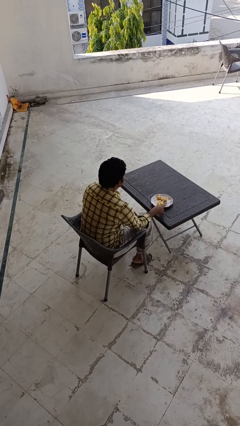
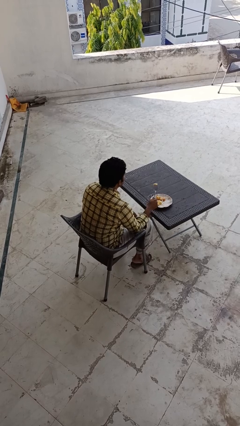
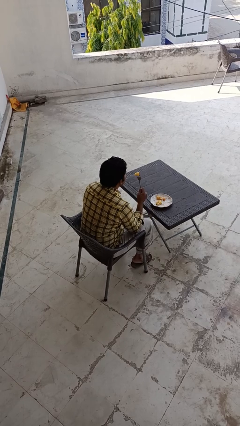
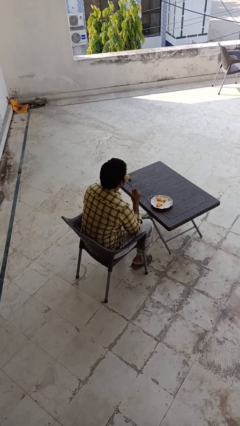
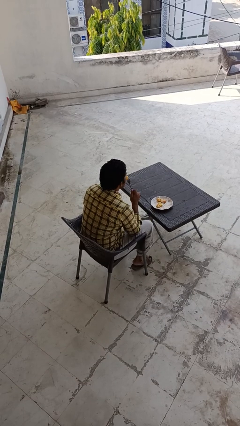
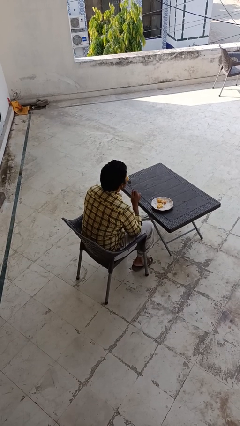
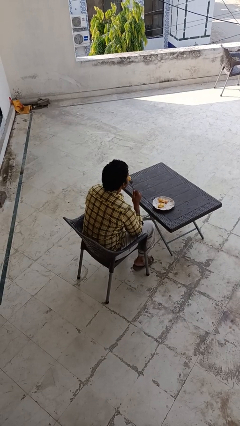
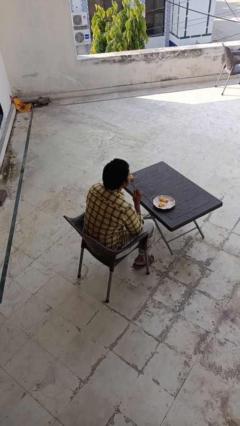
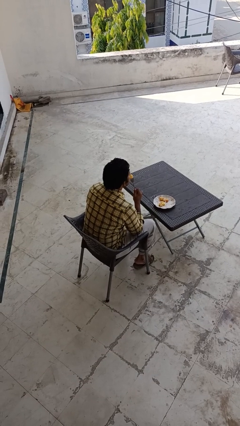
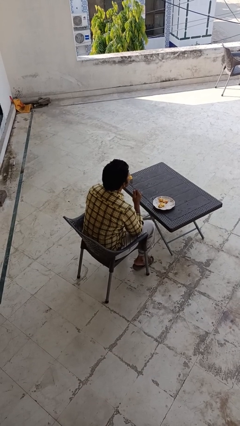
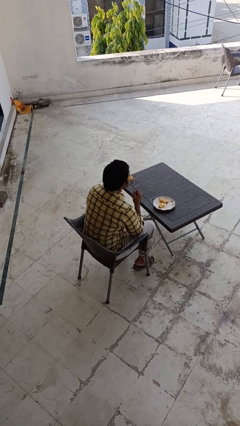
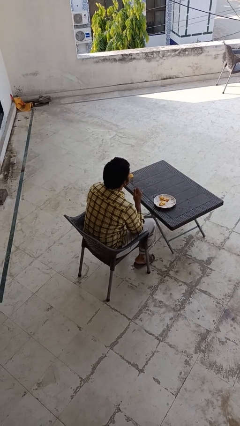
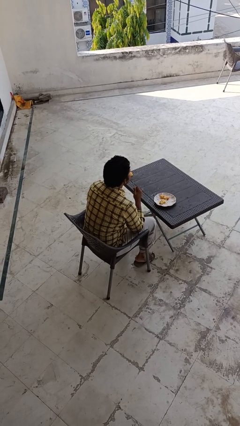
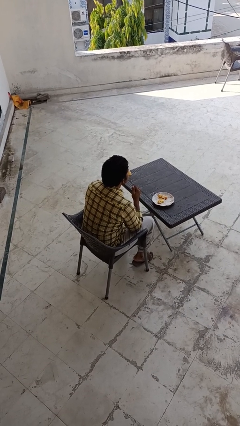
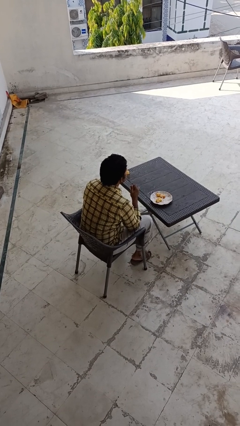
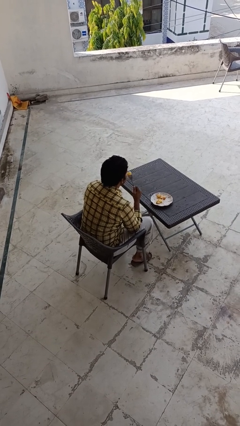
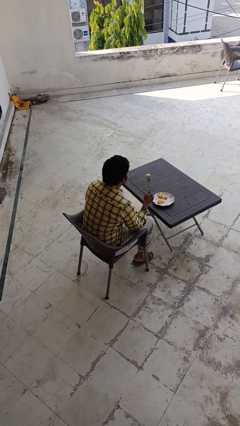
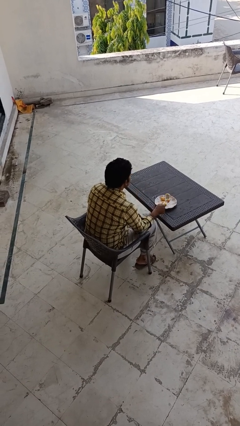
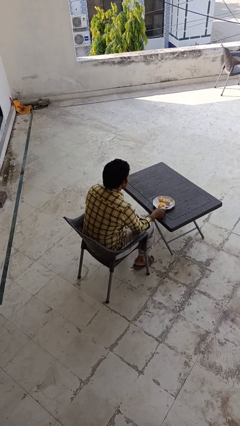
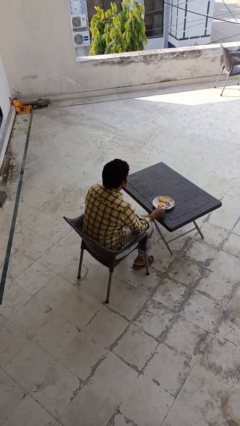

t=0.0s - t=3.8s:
person eats with utensil

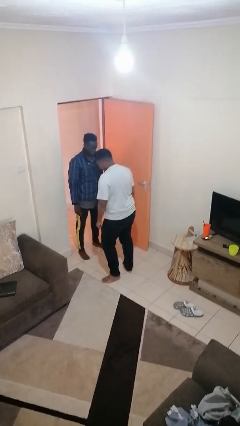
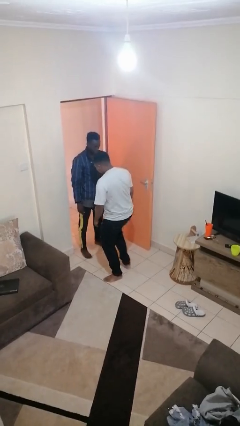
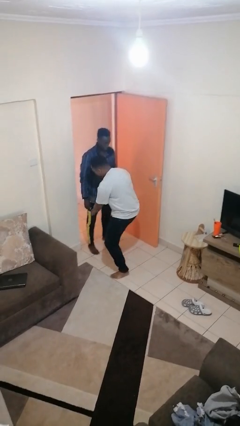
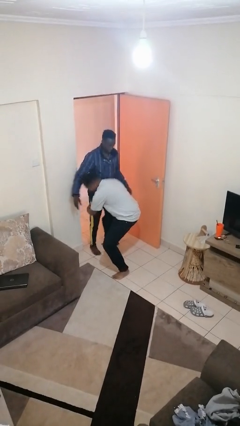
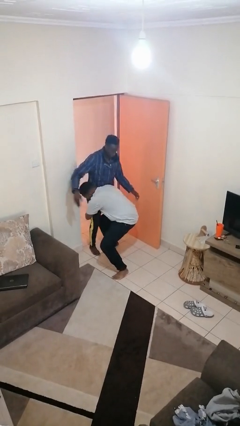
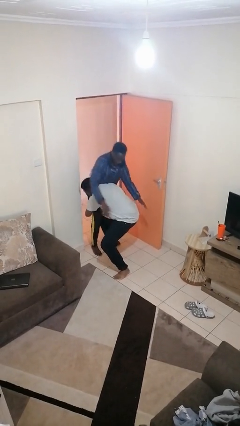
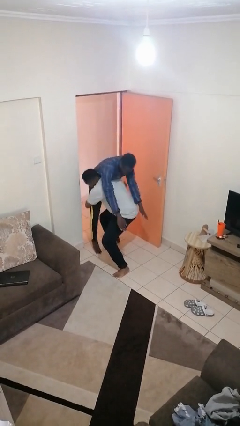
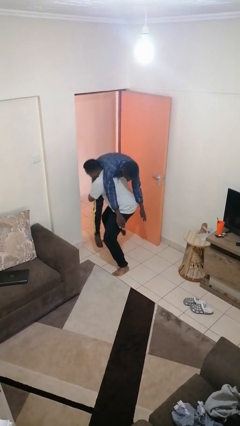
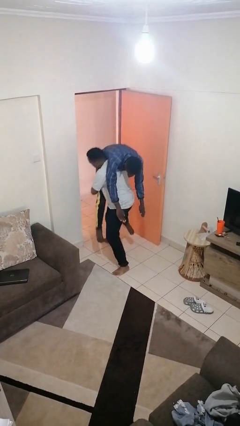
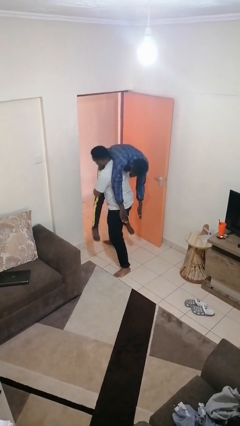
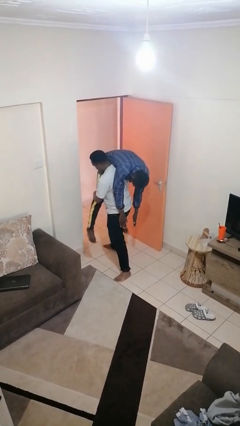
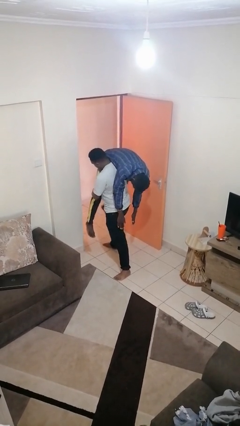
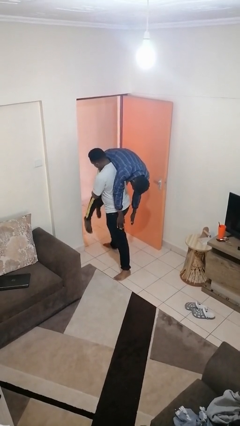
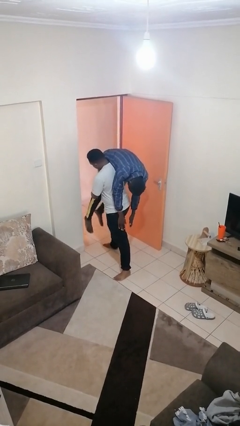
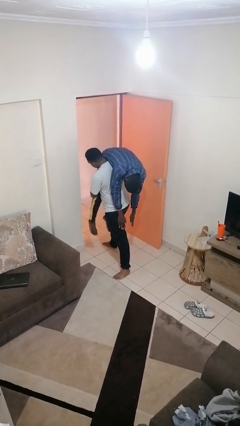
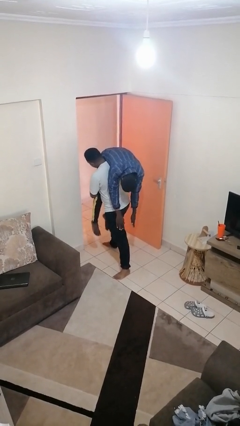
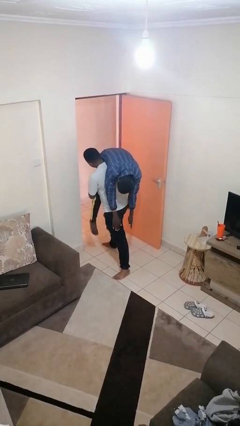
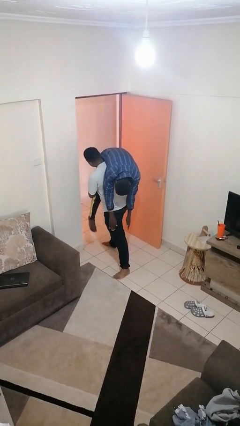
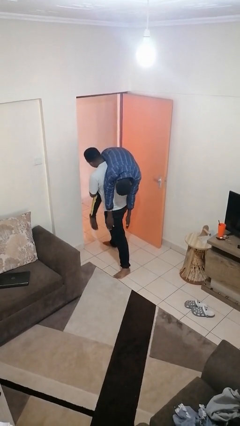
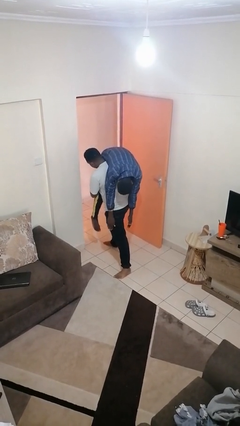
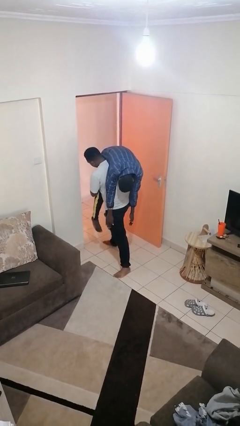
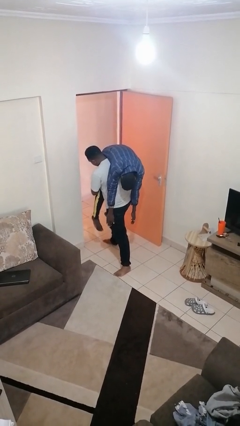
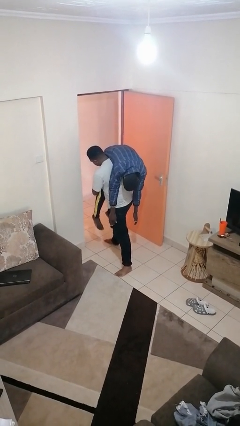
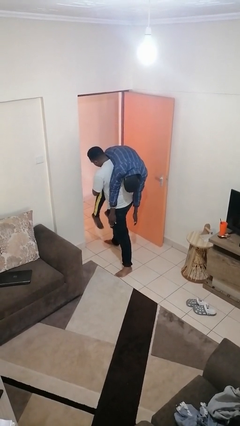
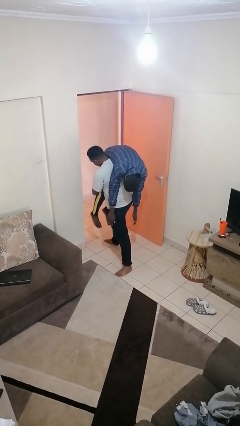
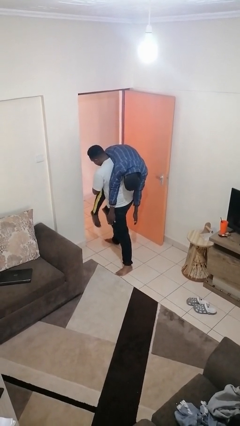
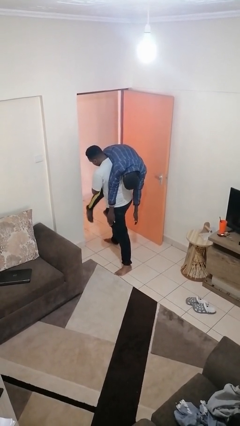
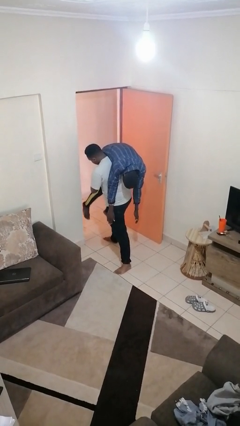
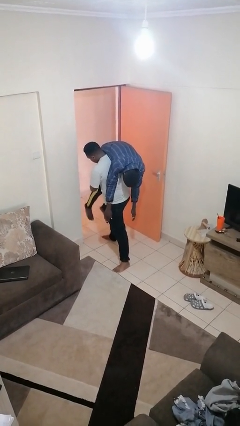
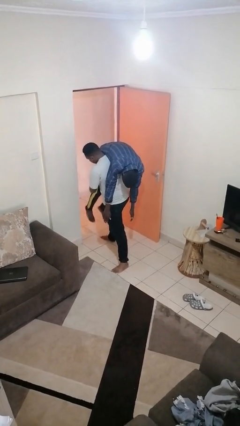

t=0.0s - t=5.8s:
person carries person over shoulder

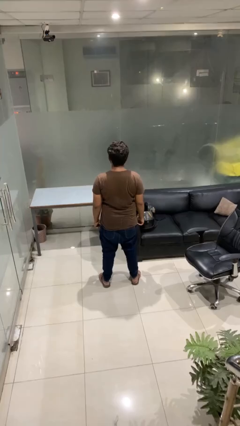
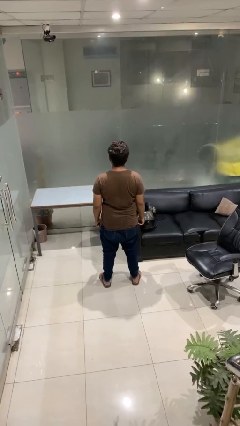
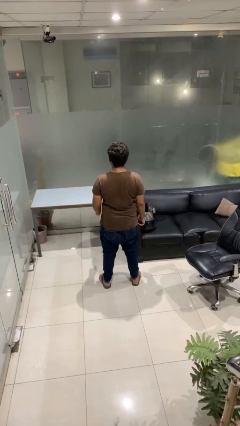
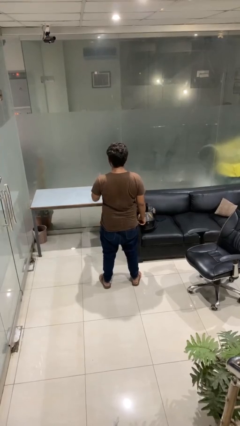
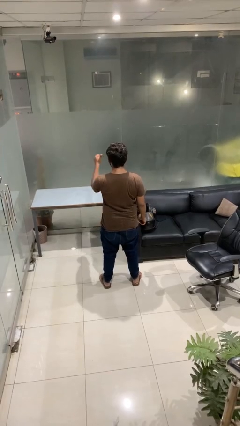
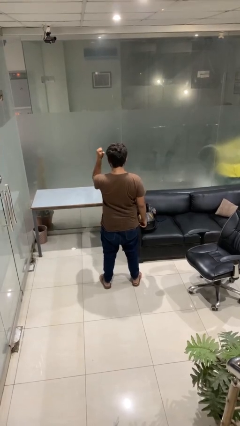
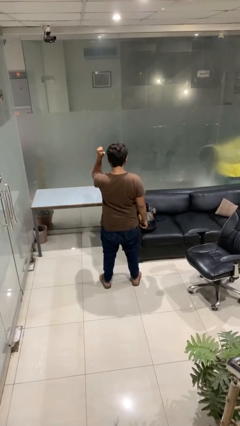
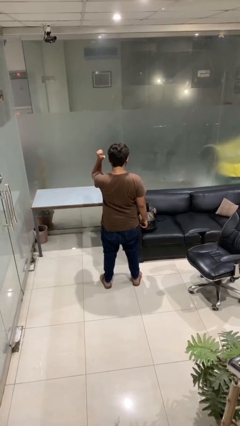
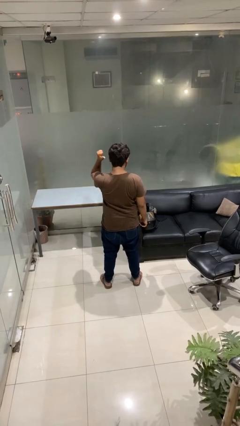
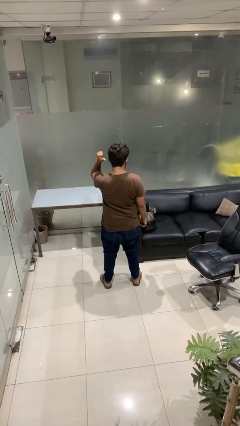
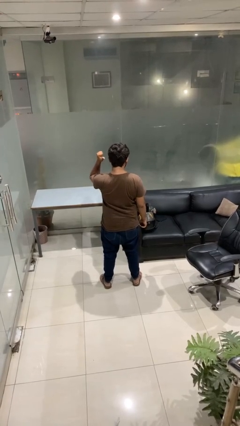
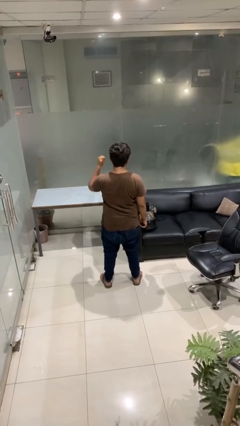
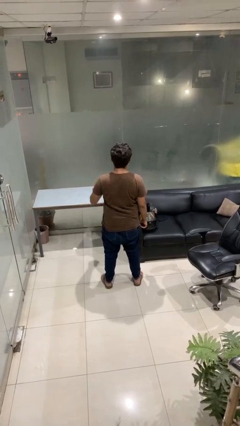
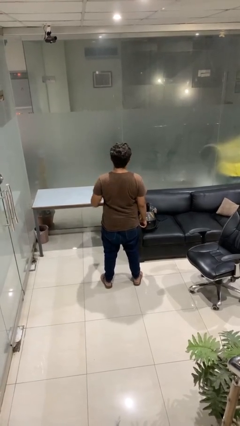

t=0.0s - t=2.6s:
person gestures behind me

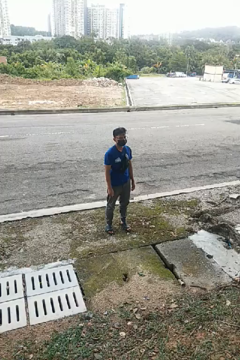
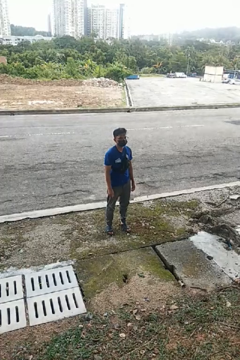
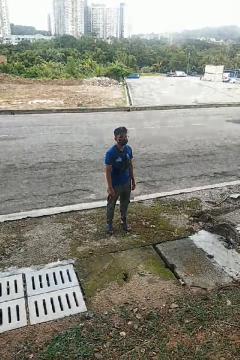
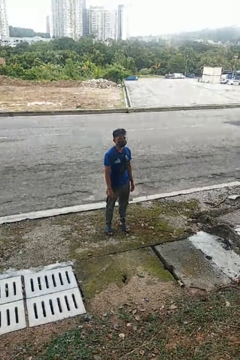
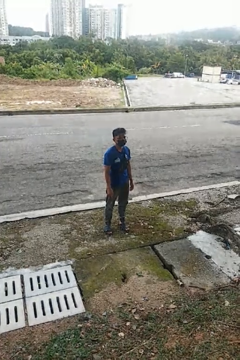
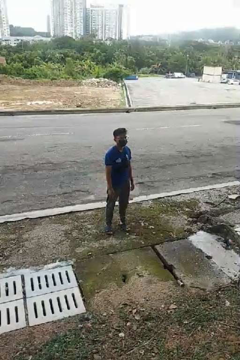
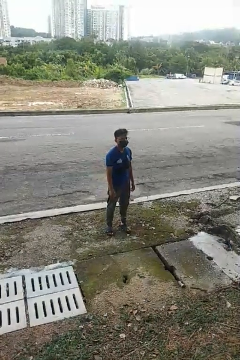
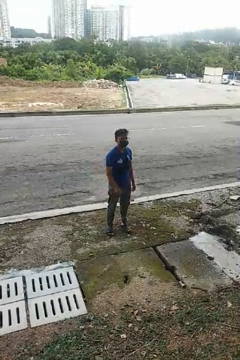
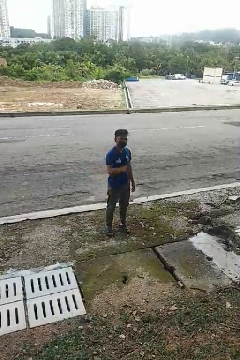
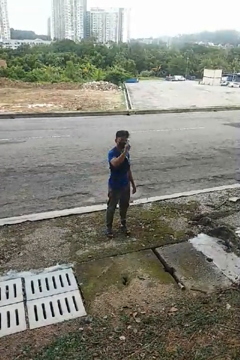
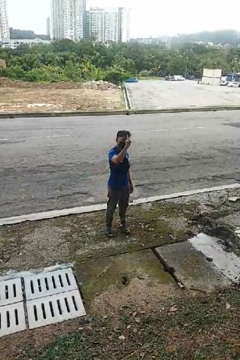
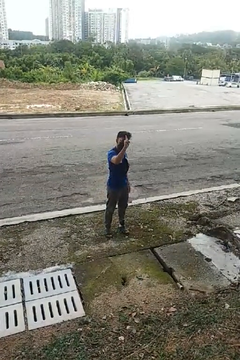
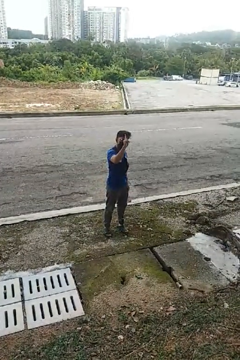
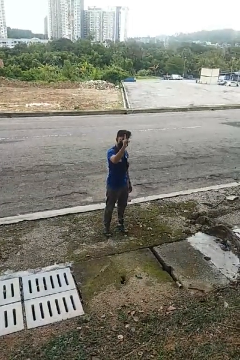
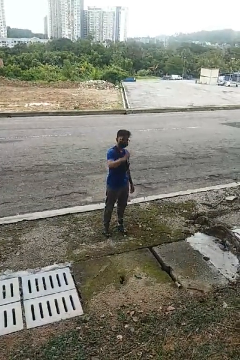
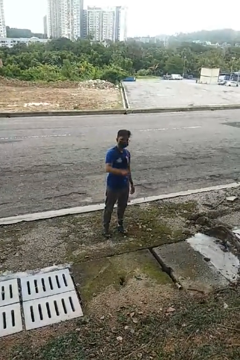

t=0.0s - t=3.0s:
person gestures number one

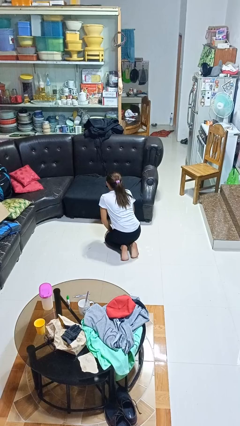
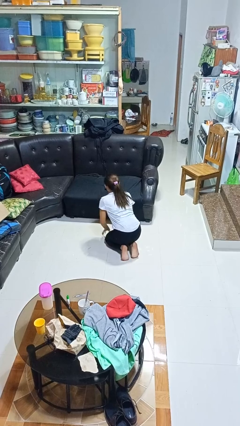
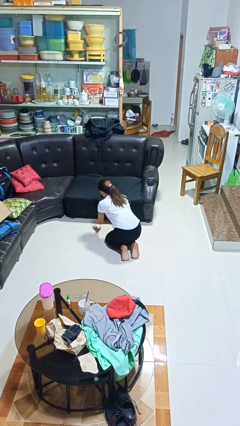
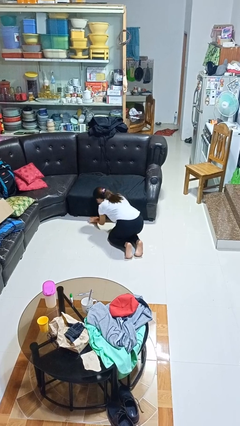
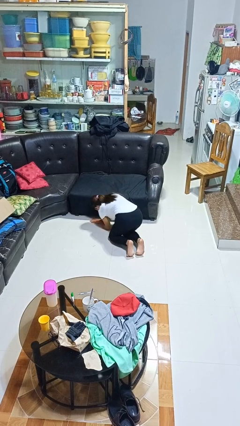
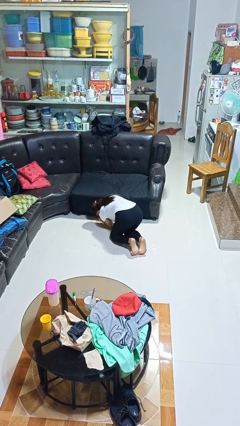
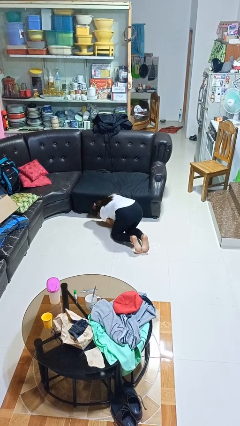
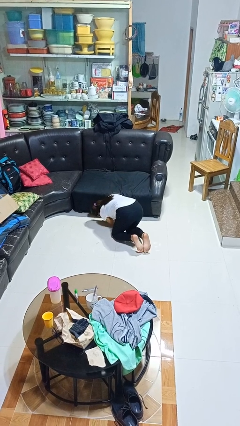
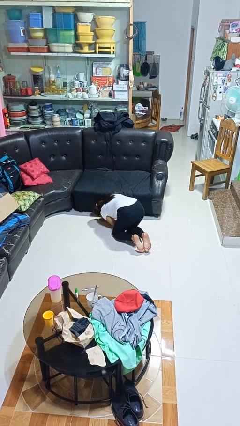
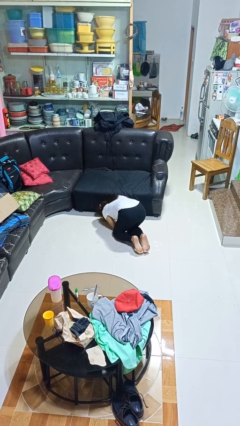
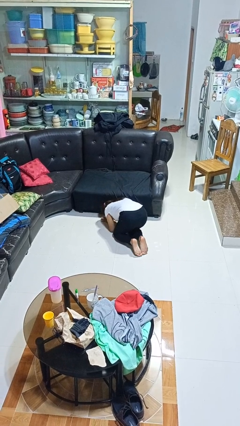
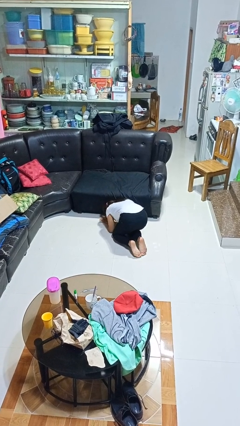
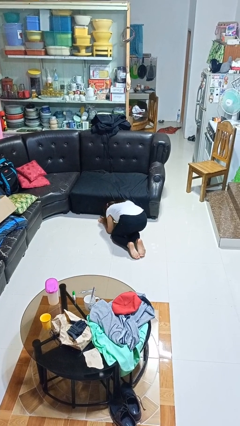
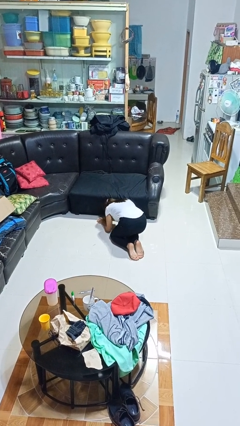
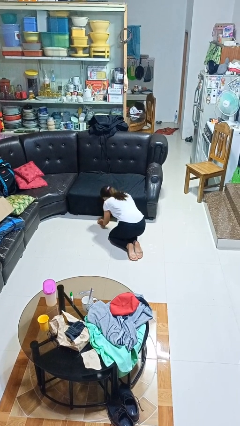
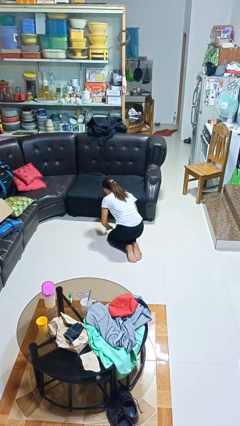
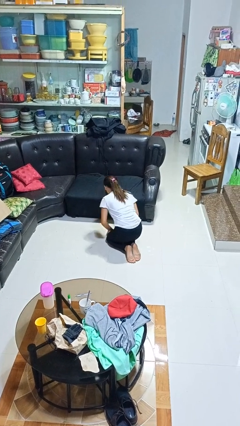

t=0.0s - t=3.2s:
person searches under couch
